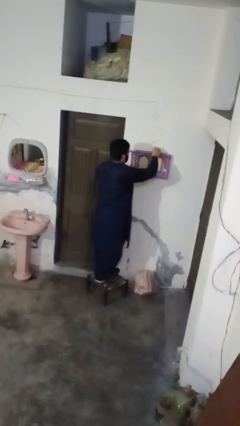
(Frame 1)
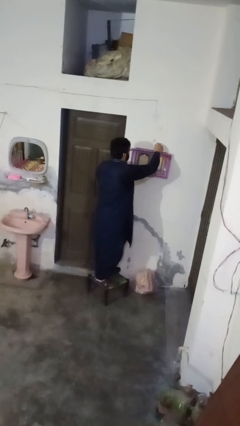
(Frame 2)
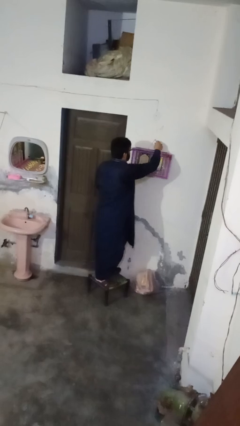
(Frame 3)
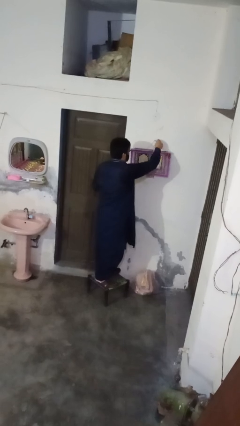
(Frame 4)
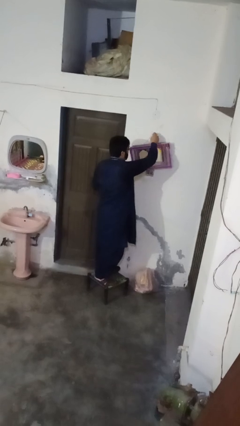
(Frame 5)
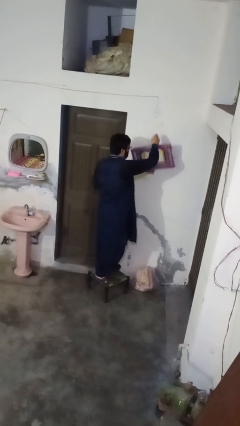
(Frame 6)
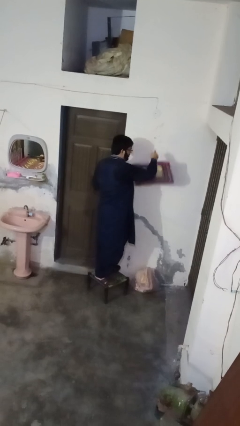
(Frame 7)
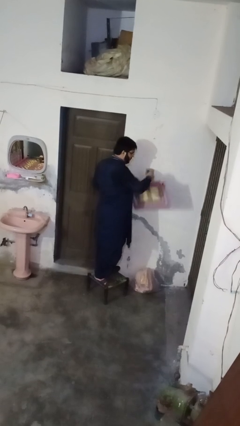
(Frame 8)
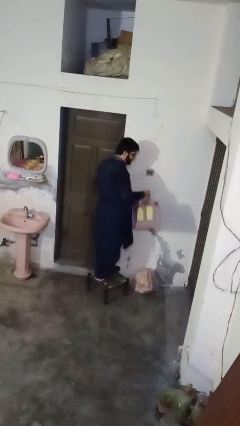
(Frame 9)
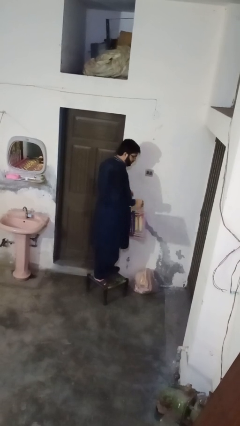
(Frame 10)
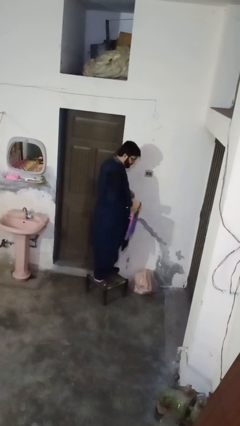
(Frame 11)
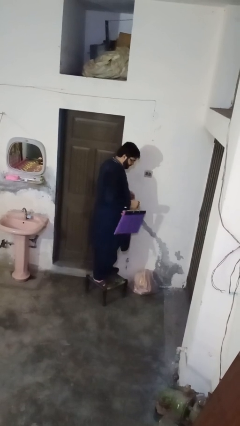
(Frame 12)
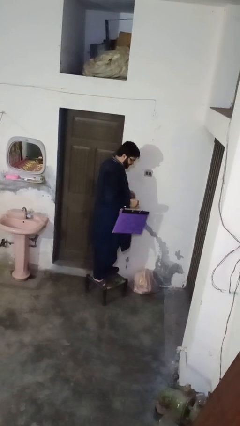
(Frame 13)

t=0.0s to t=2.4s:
person takes down picture frame

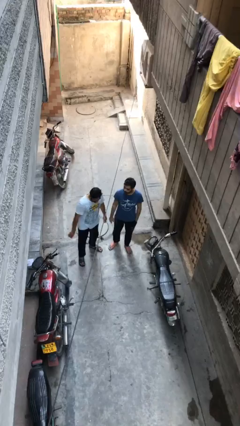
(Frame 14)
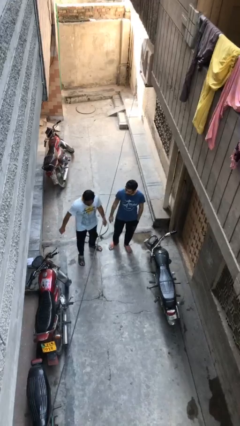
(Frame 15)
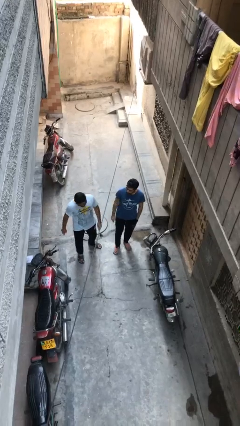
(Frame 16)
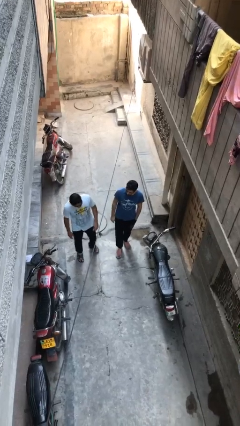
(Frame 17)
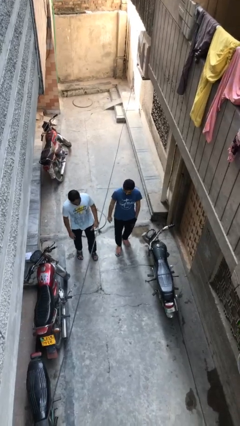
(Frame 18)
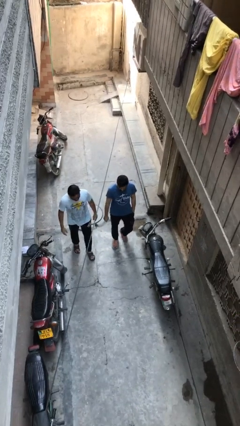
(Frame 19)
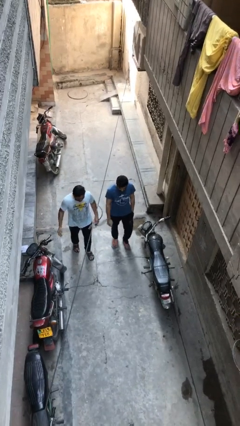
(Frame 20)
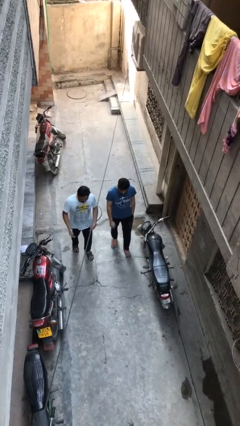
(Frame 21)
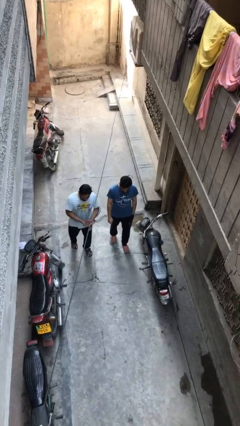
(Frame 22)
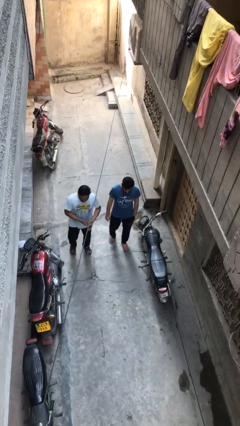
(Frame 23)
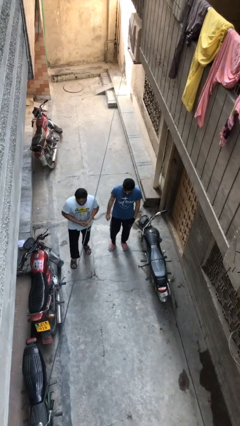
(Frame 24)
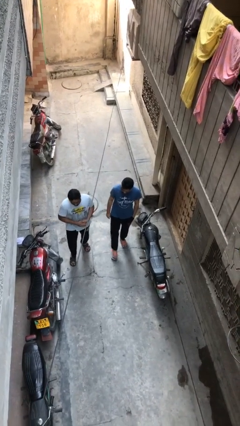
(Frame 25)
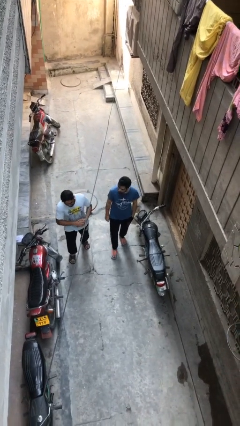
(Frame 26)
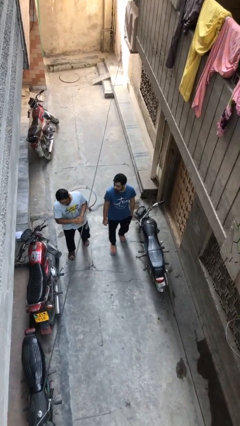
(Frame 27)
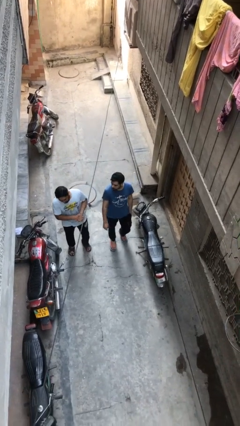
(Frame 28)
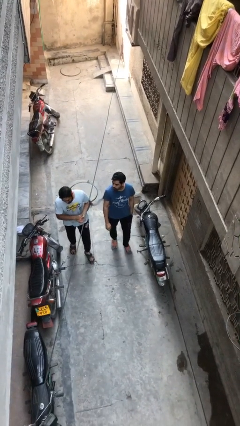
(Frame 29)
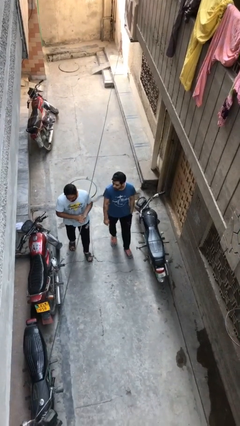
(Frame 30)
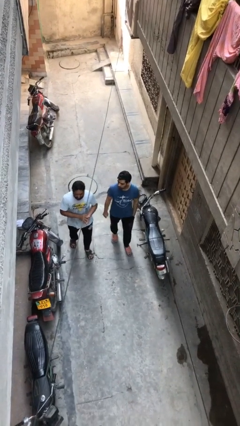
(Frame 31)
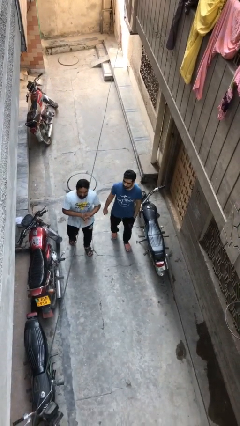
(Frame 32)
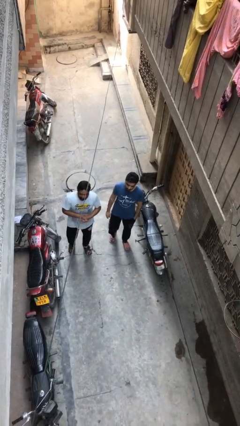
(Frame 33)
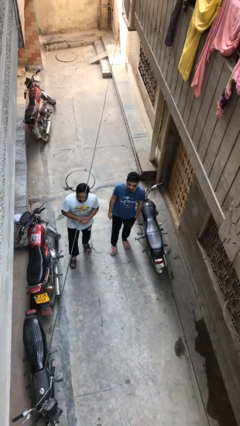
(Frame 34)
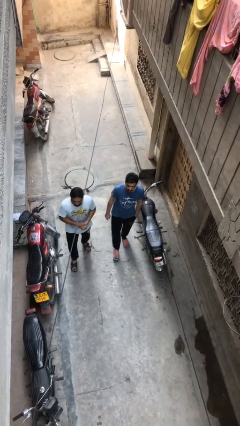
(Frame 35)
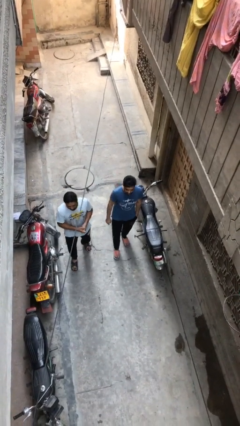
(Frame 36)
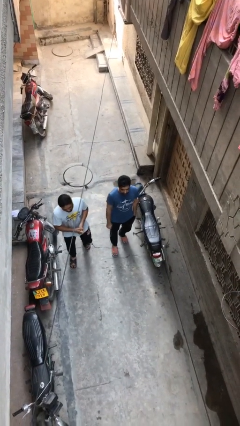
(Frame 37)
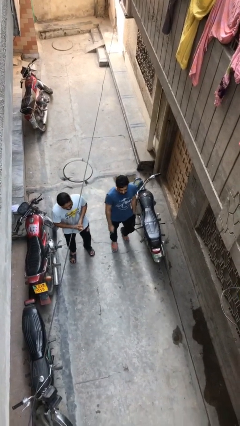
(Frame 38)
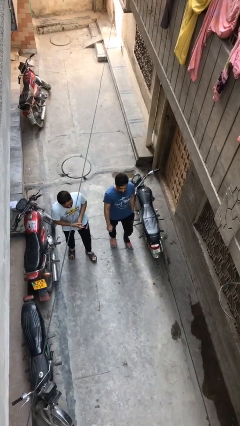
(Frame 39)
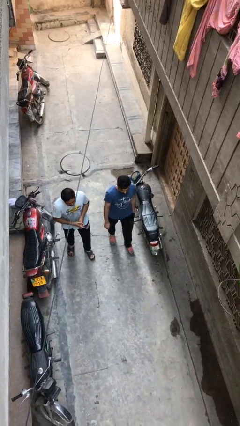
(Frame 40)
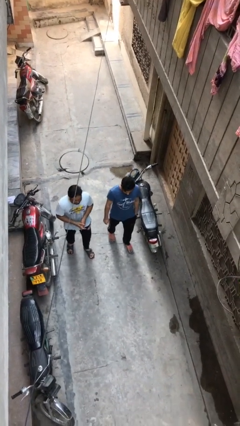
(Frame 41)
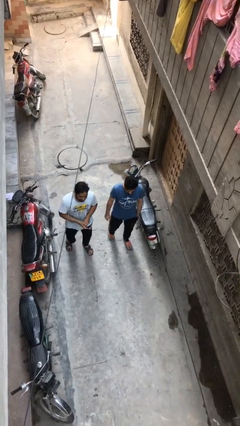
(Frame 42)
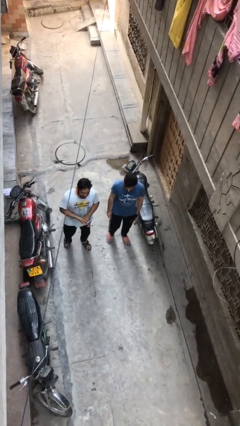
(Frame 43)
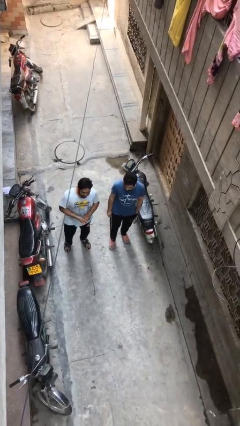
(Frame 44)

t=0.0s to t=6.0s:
person talks to person

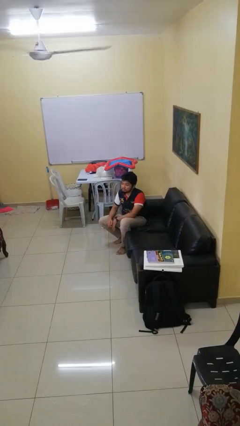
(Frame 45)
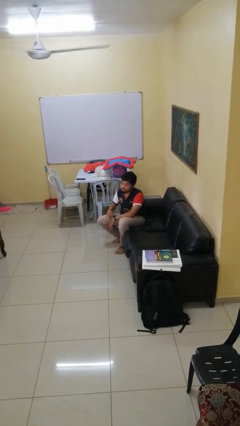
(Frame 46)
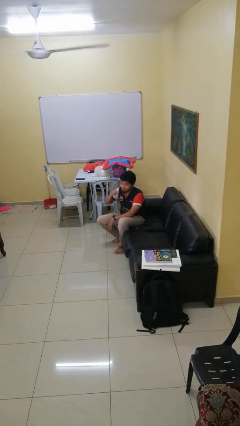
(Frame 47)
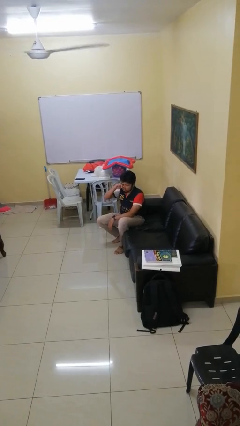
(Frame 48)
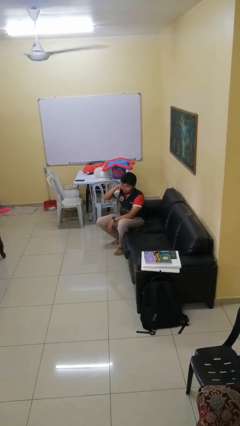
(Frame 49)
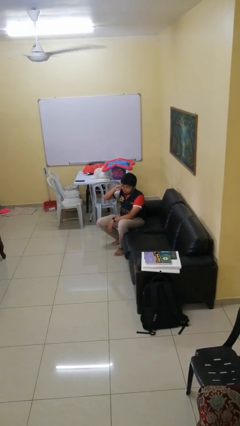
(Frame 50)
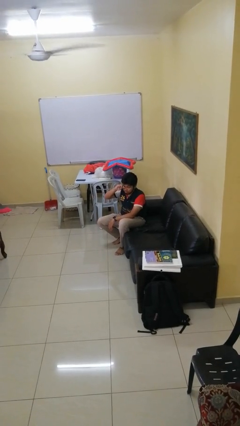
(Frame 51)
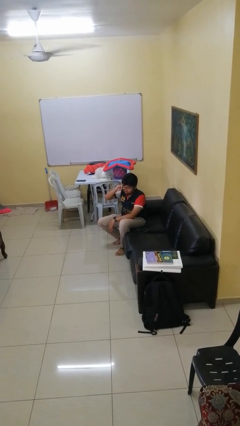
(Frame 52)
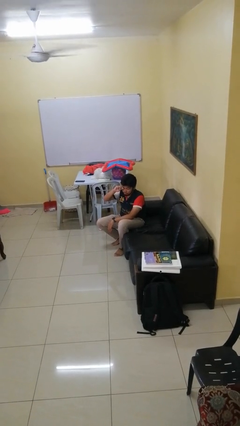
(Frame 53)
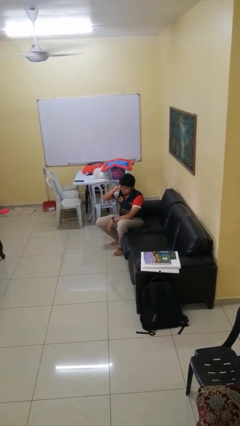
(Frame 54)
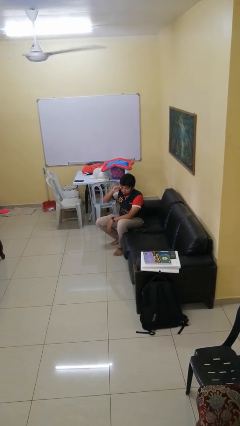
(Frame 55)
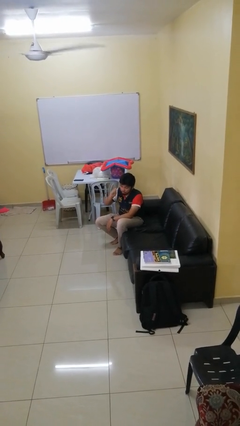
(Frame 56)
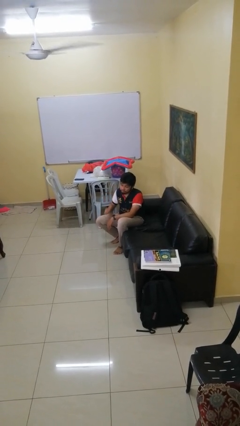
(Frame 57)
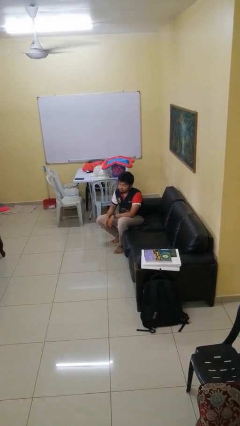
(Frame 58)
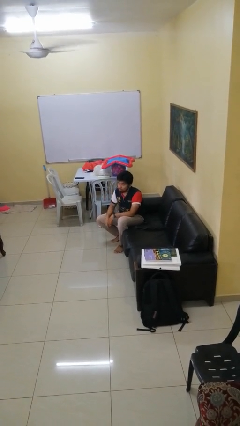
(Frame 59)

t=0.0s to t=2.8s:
person scratches face

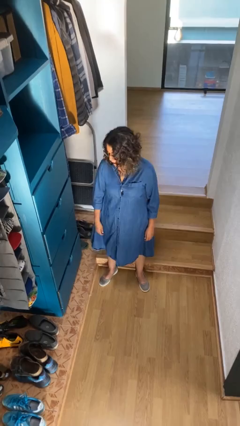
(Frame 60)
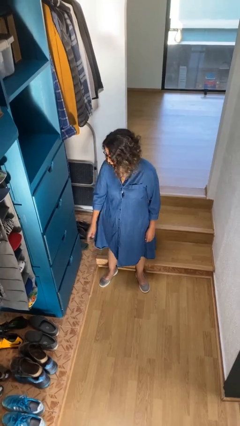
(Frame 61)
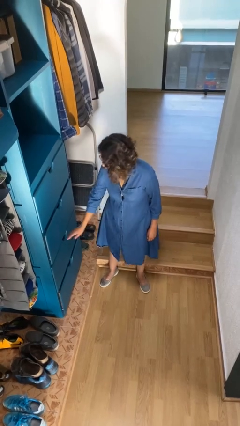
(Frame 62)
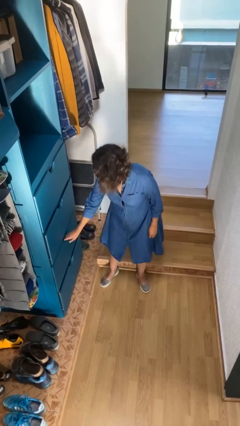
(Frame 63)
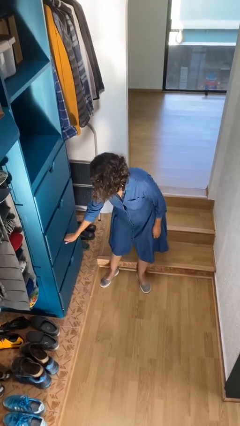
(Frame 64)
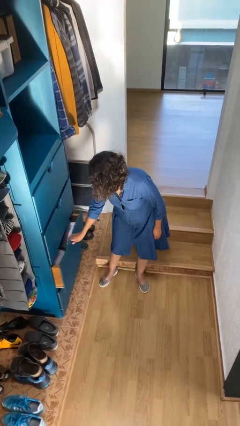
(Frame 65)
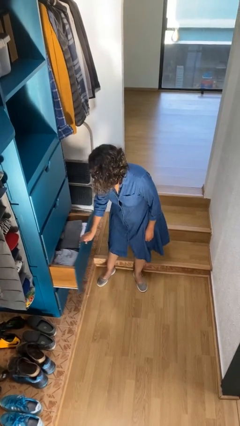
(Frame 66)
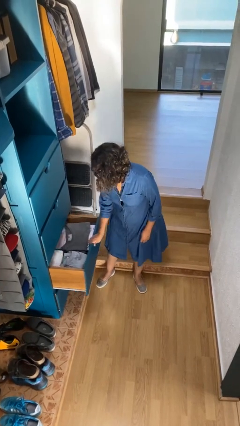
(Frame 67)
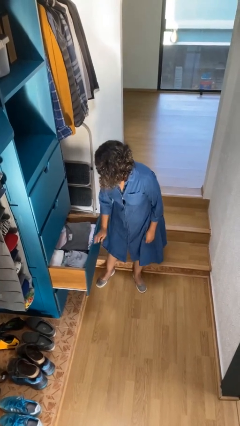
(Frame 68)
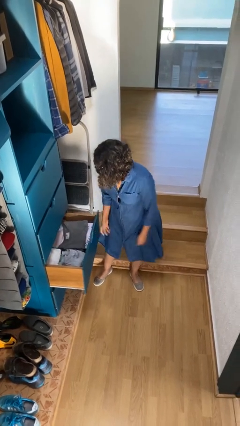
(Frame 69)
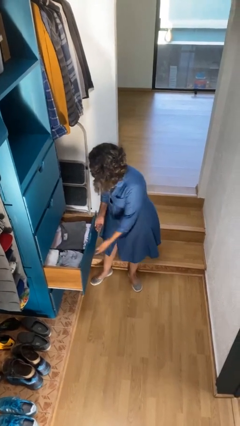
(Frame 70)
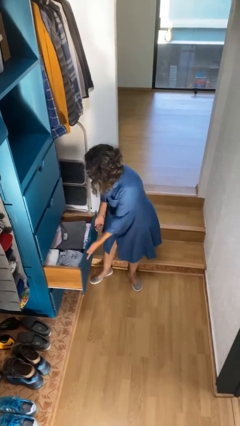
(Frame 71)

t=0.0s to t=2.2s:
person opens dresser drawer

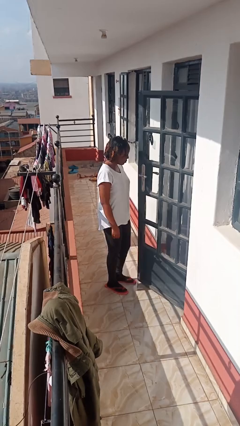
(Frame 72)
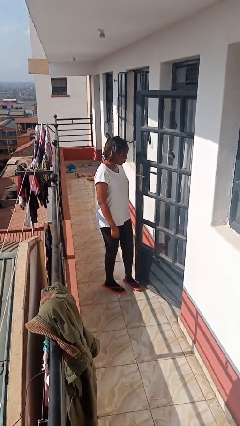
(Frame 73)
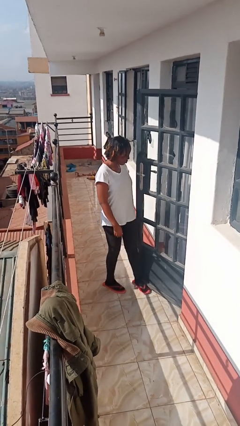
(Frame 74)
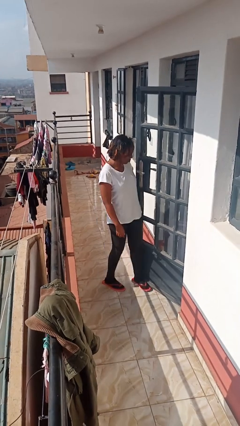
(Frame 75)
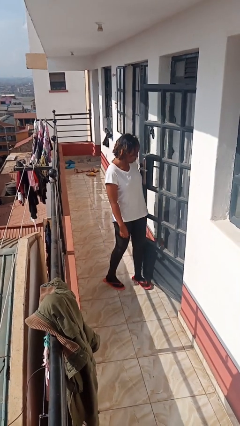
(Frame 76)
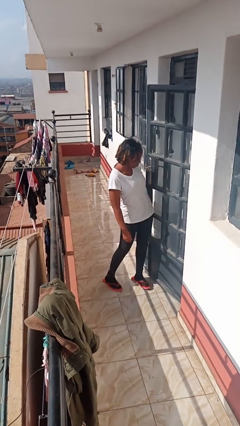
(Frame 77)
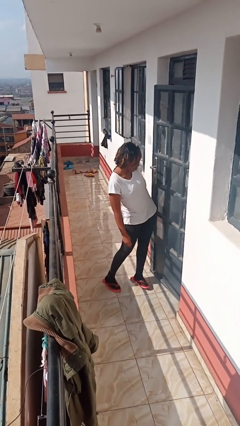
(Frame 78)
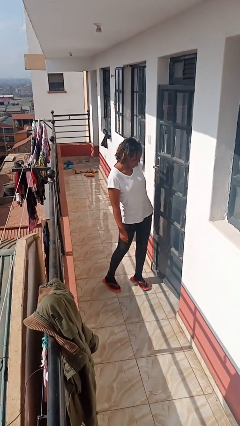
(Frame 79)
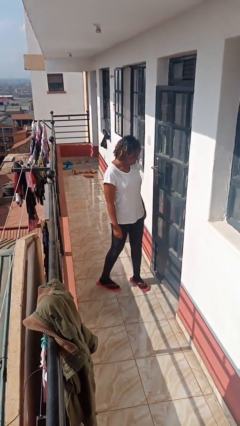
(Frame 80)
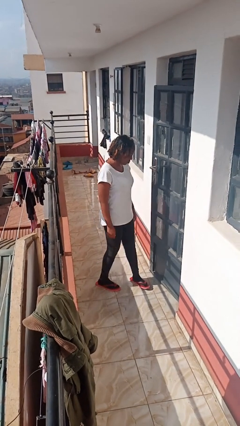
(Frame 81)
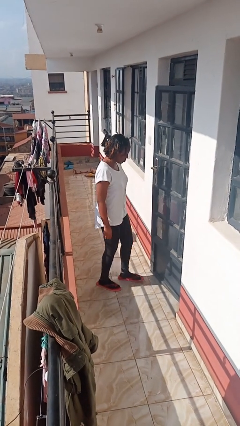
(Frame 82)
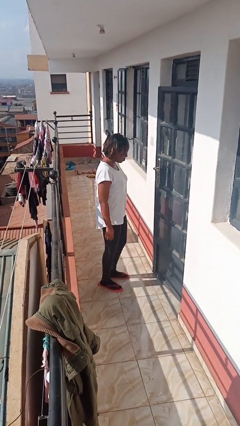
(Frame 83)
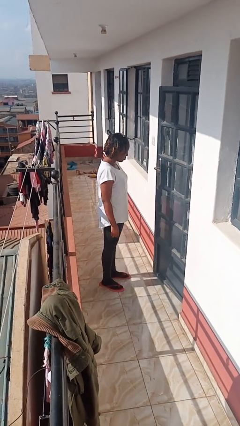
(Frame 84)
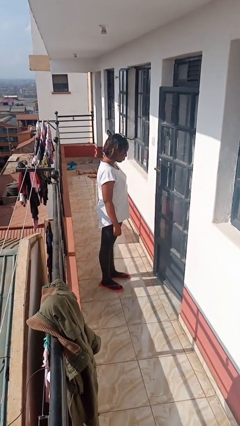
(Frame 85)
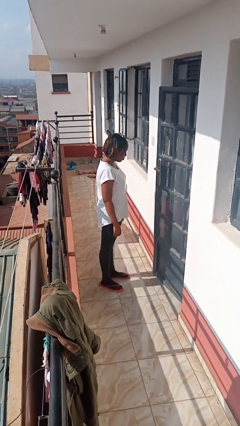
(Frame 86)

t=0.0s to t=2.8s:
person closes door with hip

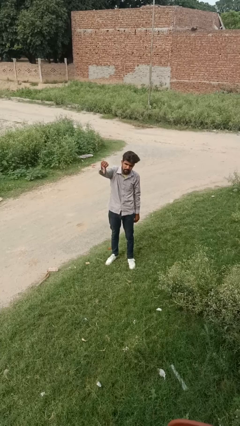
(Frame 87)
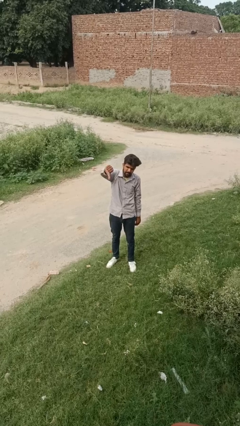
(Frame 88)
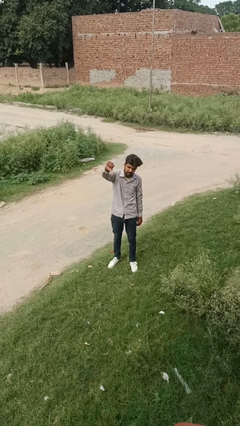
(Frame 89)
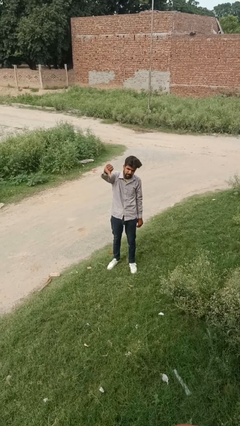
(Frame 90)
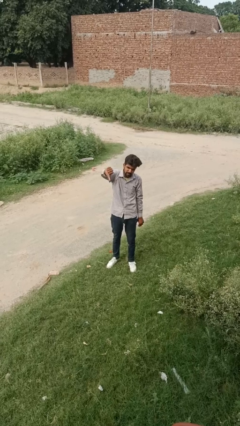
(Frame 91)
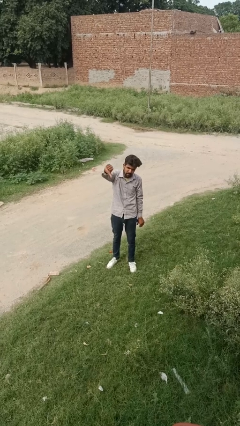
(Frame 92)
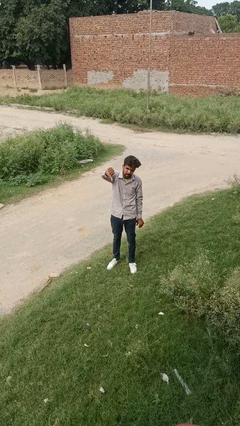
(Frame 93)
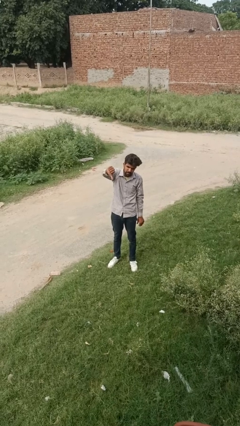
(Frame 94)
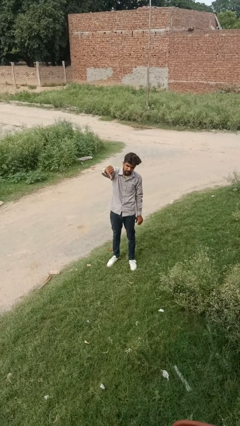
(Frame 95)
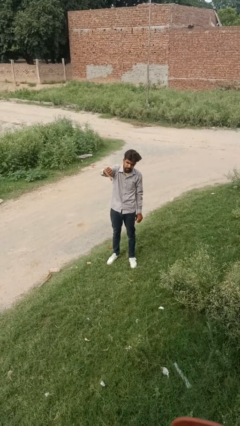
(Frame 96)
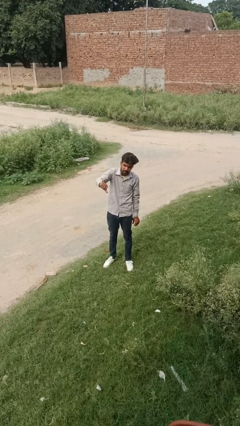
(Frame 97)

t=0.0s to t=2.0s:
person gestures thumbs down
